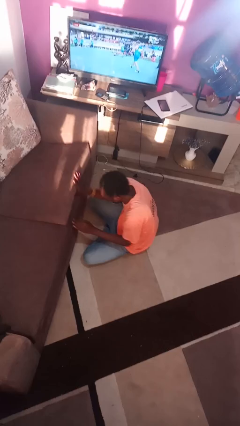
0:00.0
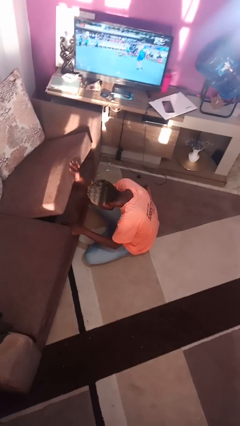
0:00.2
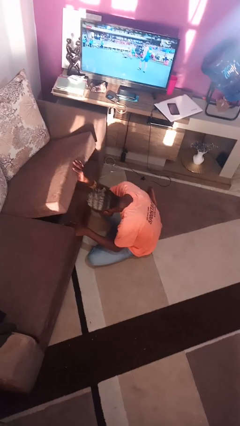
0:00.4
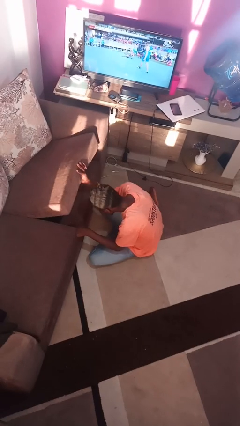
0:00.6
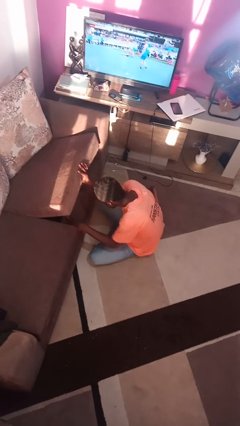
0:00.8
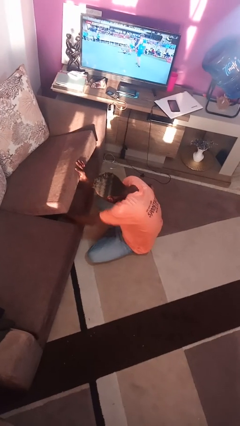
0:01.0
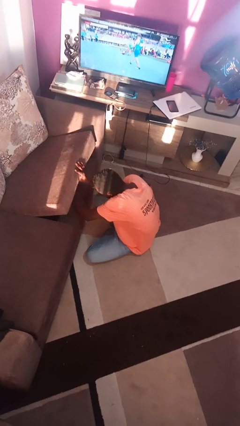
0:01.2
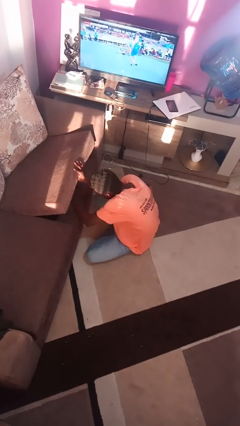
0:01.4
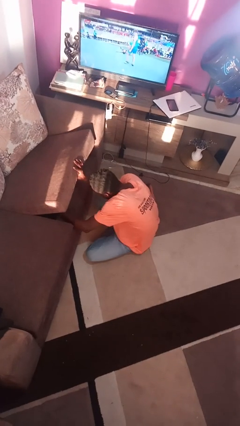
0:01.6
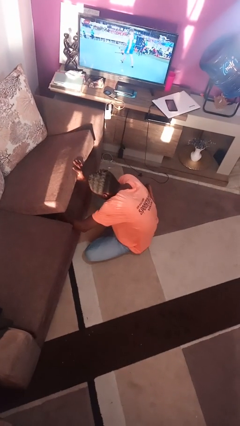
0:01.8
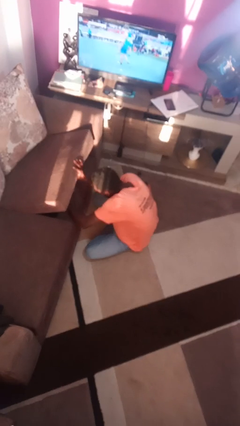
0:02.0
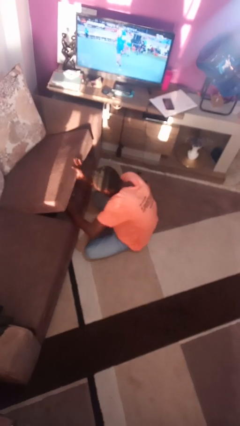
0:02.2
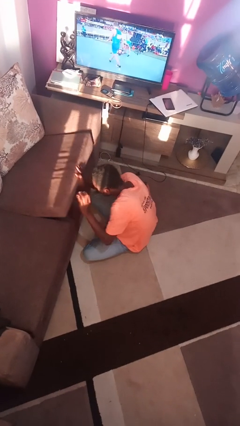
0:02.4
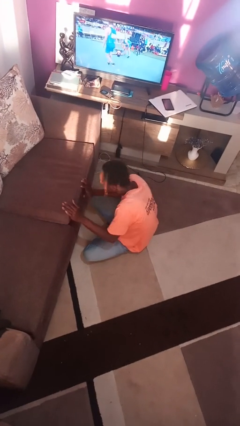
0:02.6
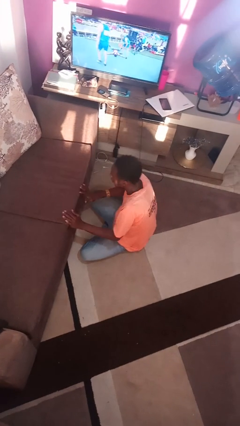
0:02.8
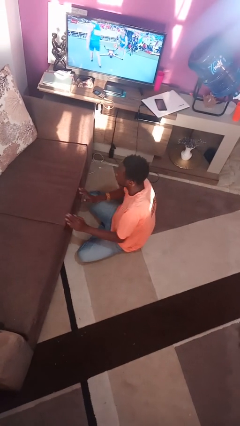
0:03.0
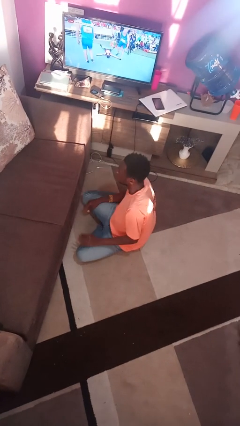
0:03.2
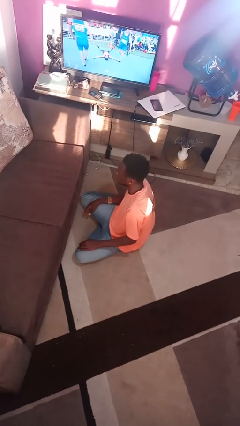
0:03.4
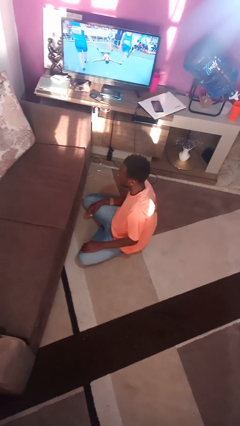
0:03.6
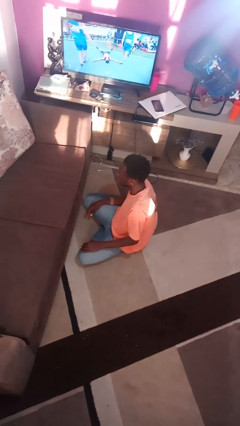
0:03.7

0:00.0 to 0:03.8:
person searches under couch

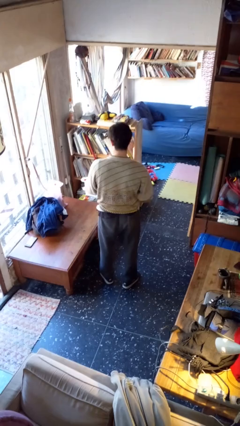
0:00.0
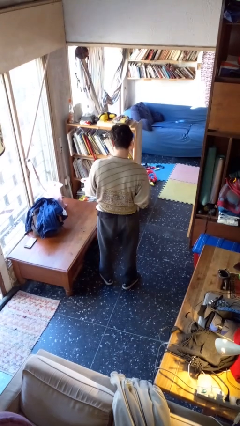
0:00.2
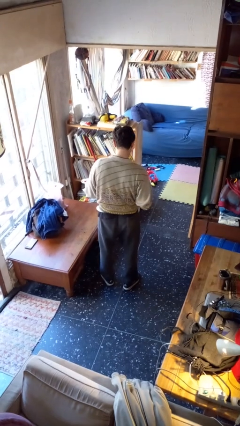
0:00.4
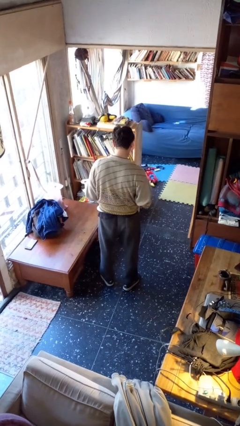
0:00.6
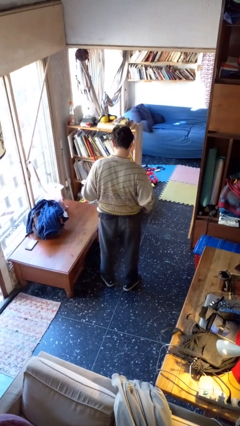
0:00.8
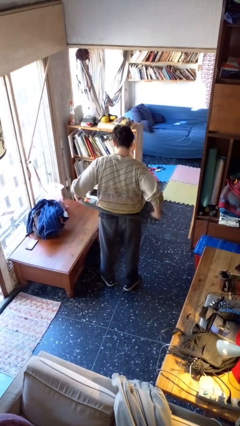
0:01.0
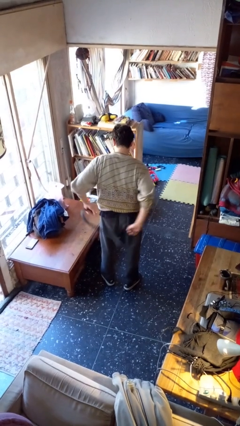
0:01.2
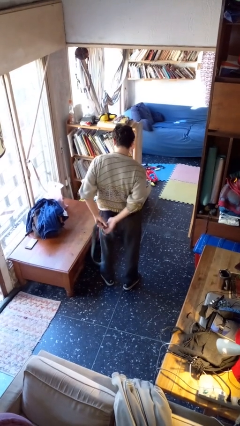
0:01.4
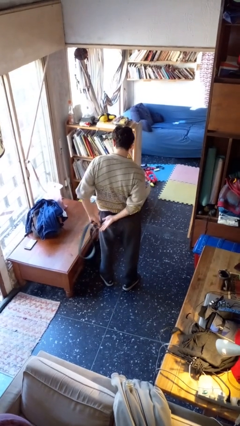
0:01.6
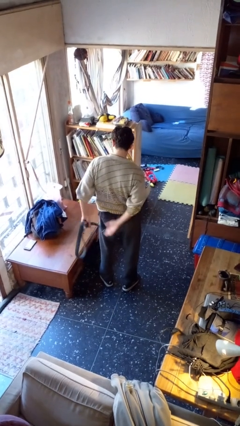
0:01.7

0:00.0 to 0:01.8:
person takes off belt

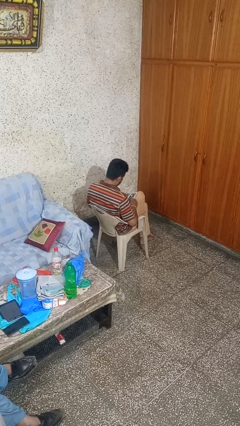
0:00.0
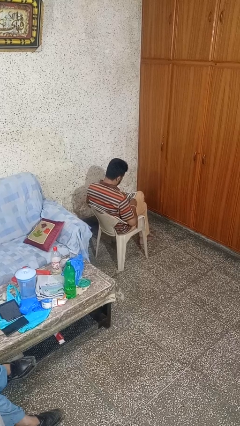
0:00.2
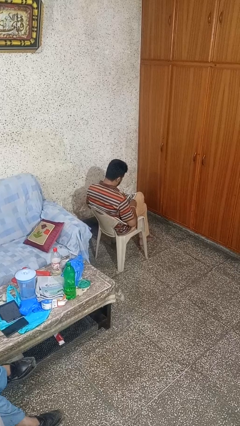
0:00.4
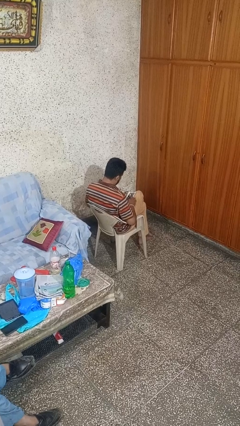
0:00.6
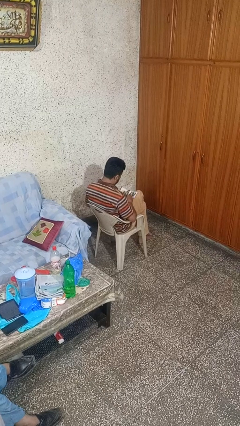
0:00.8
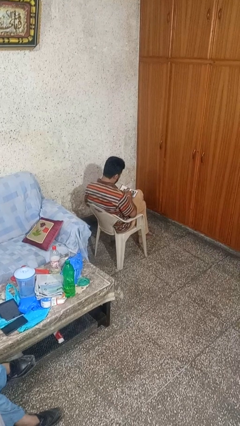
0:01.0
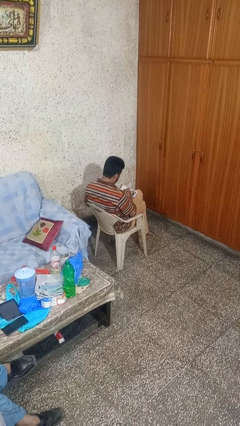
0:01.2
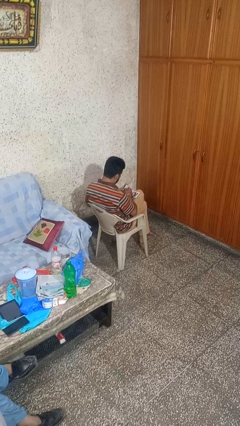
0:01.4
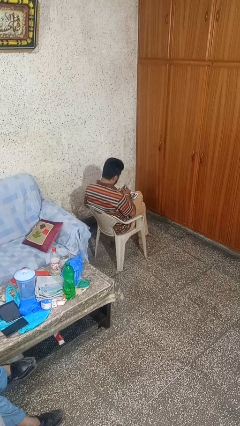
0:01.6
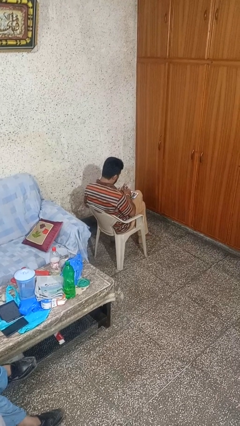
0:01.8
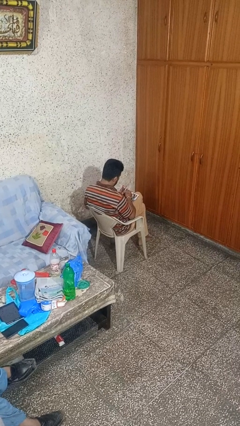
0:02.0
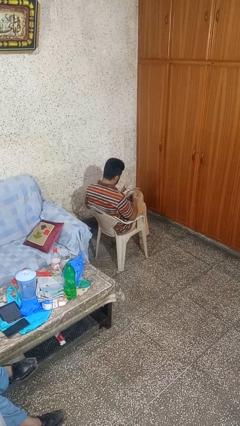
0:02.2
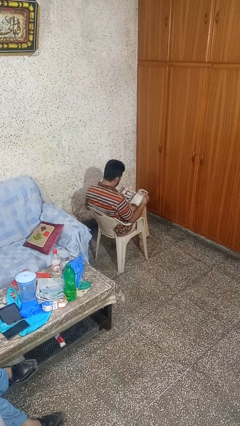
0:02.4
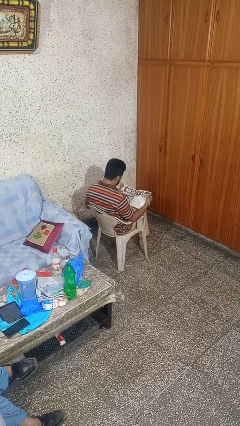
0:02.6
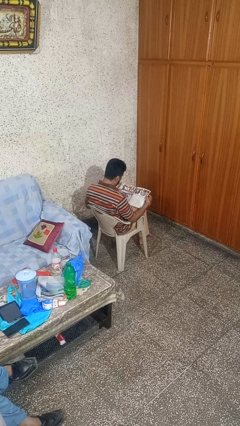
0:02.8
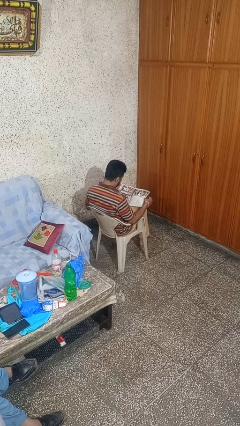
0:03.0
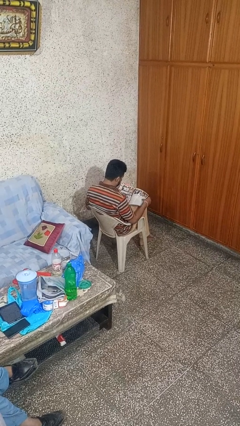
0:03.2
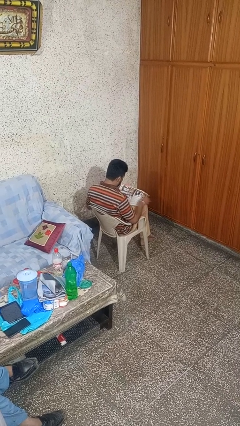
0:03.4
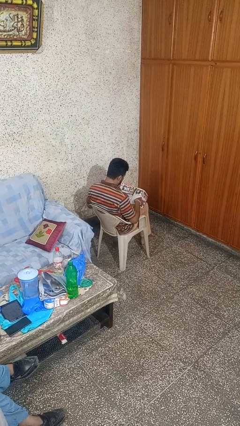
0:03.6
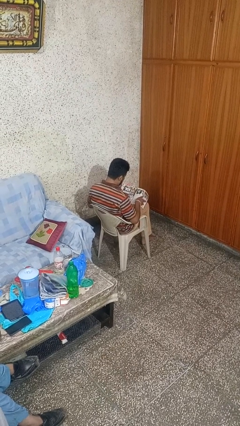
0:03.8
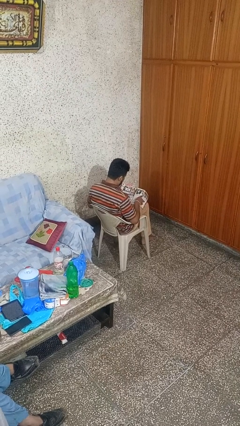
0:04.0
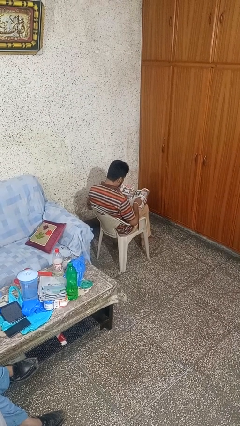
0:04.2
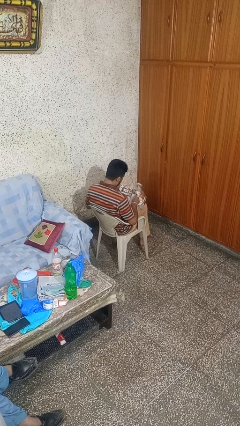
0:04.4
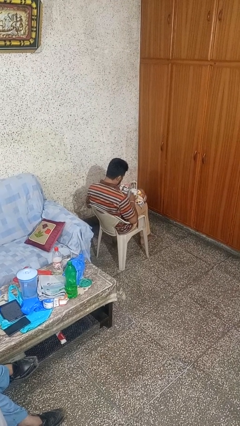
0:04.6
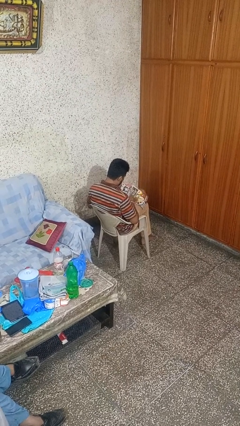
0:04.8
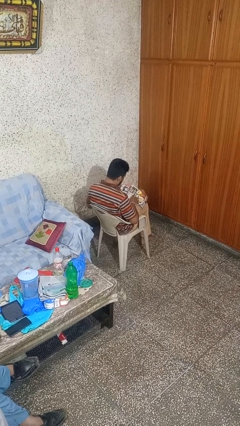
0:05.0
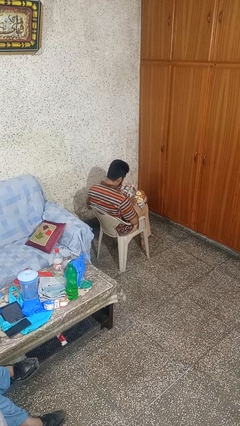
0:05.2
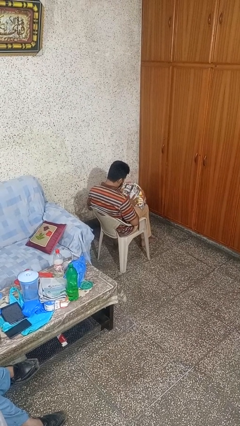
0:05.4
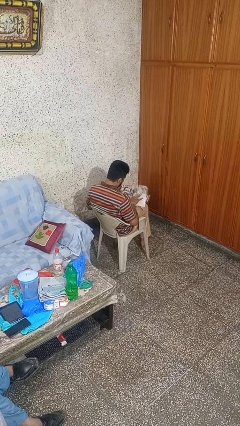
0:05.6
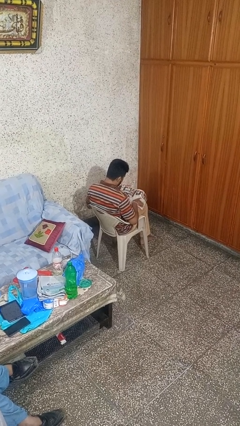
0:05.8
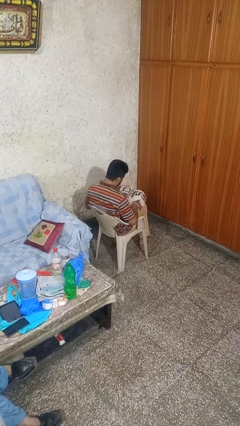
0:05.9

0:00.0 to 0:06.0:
person reads magazine

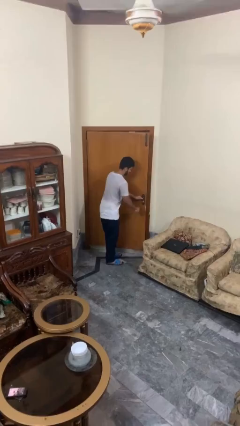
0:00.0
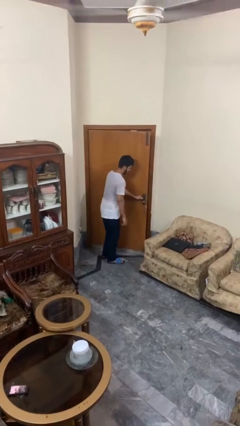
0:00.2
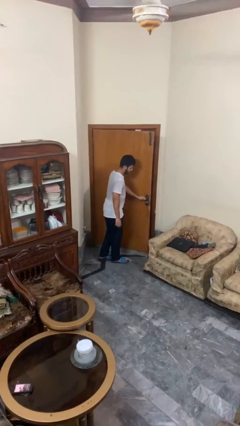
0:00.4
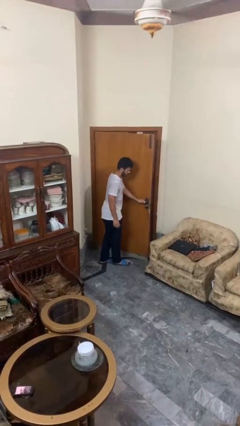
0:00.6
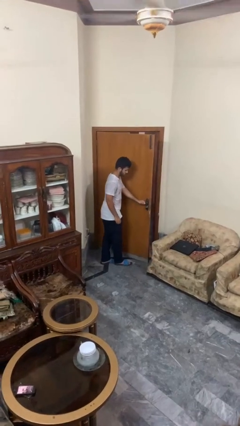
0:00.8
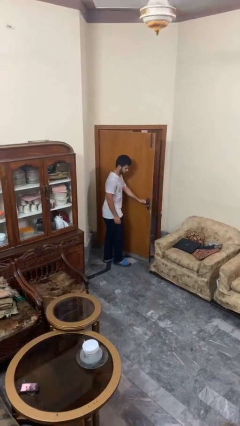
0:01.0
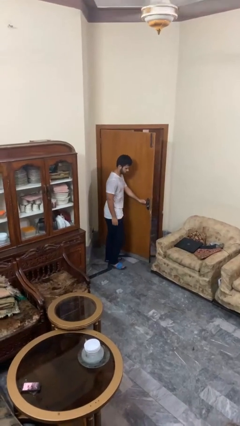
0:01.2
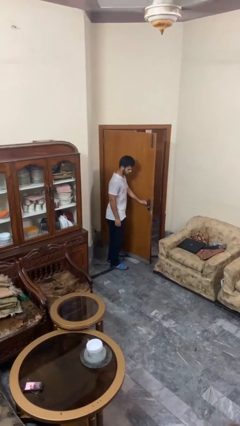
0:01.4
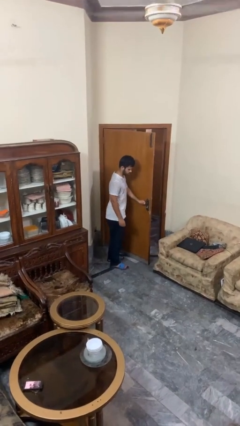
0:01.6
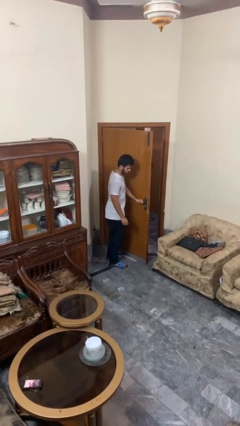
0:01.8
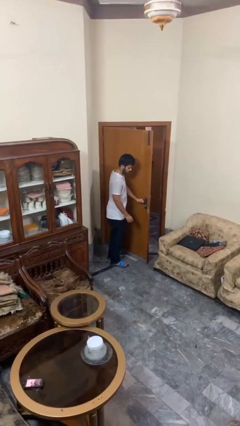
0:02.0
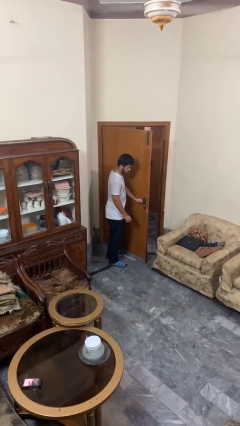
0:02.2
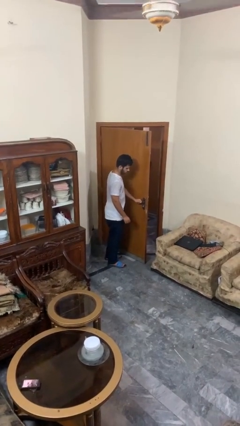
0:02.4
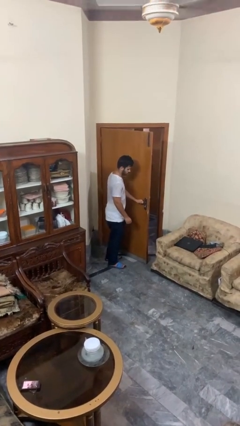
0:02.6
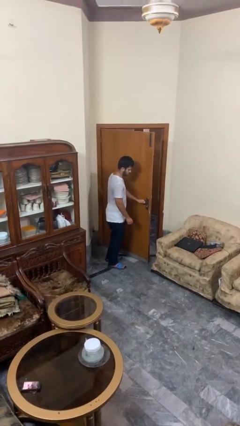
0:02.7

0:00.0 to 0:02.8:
person opens facility door

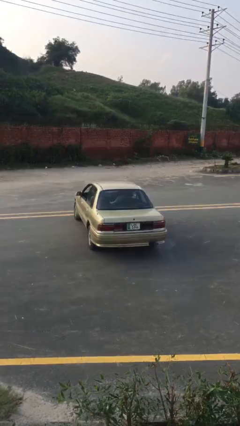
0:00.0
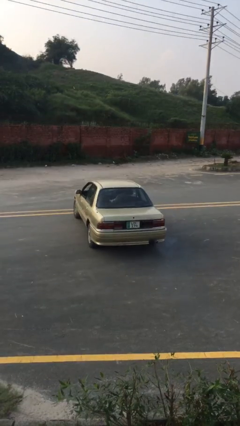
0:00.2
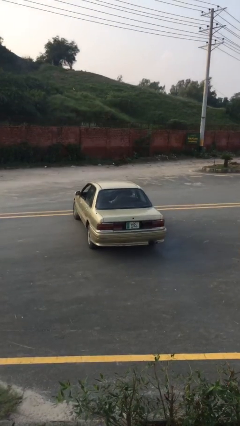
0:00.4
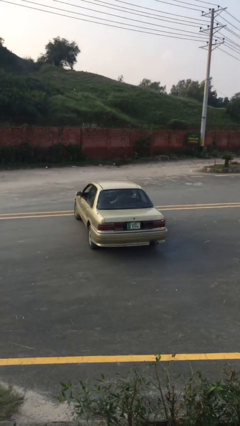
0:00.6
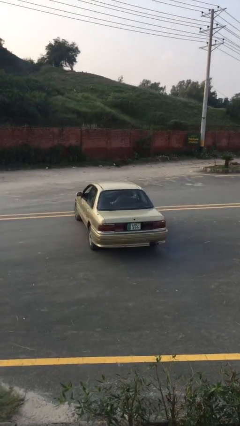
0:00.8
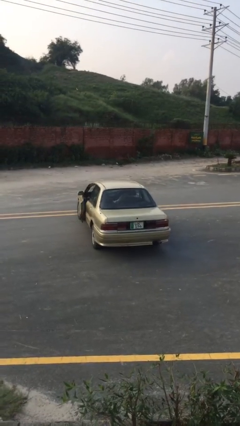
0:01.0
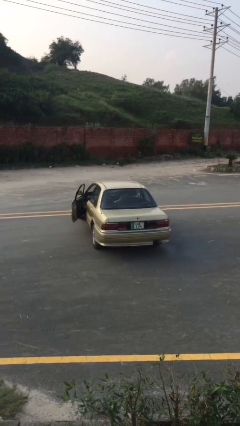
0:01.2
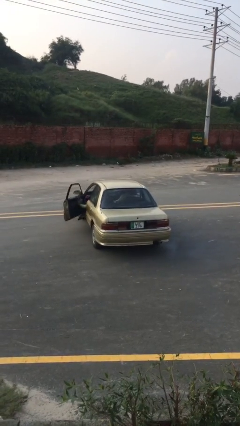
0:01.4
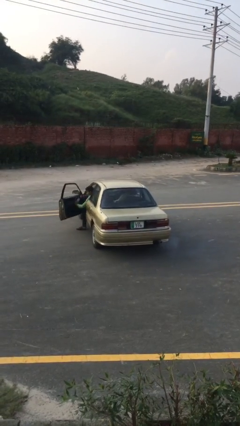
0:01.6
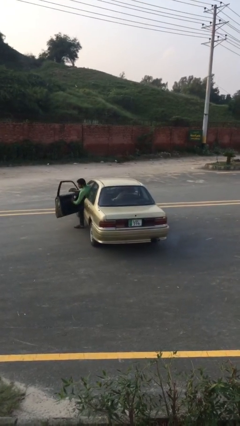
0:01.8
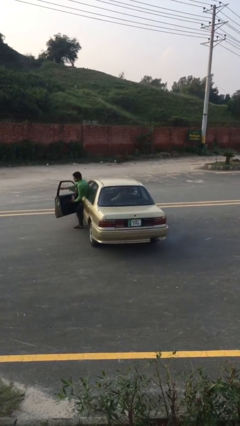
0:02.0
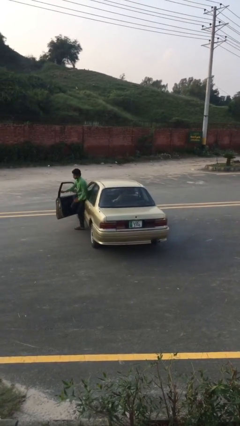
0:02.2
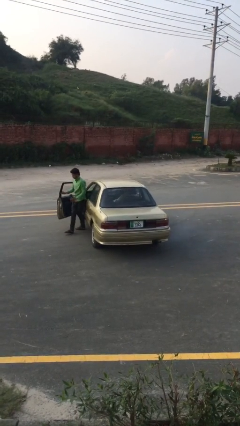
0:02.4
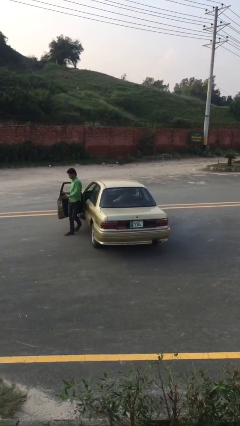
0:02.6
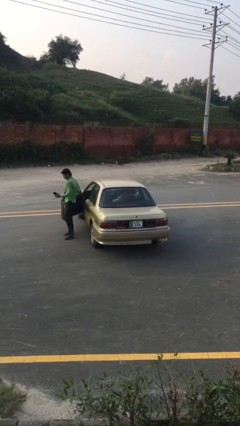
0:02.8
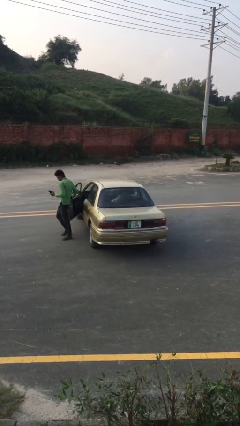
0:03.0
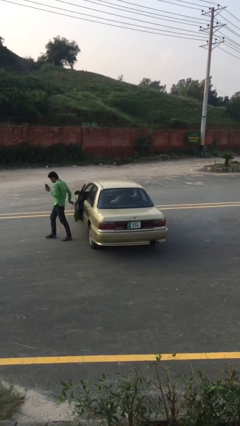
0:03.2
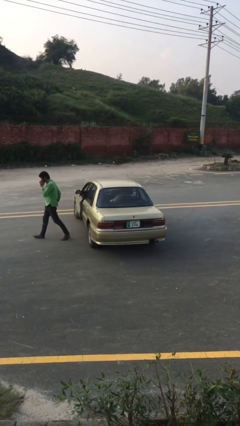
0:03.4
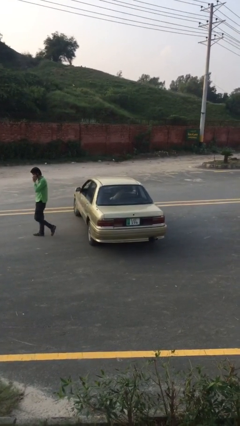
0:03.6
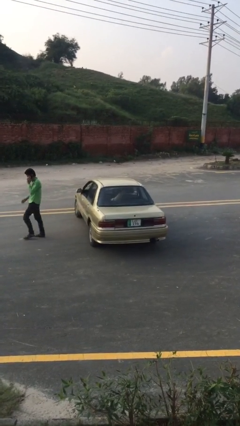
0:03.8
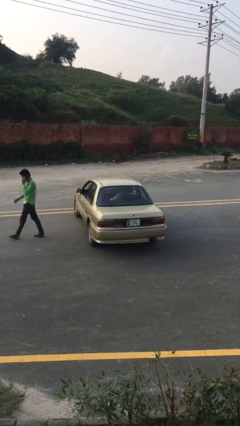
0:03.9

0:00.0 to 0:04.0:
car drops off person
